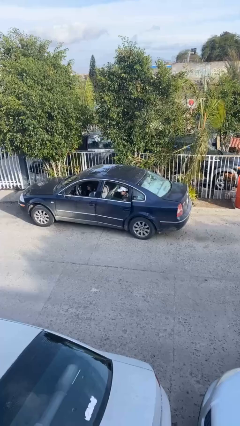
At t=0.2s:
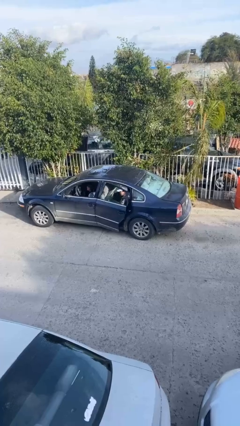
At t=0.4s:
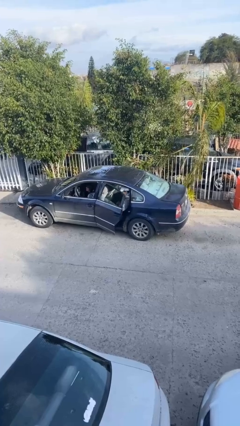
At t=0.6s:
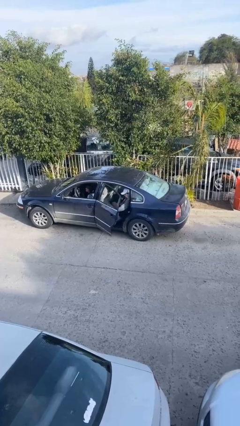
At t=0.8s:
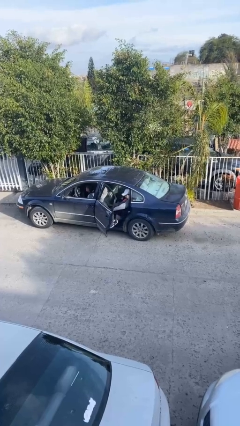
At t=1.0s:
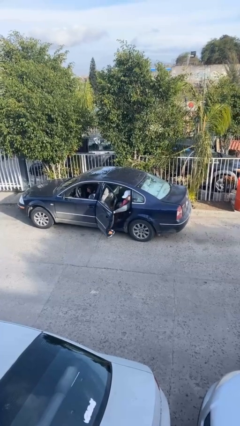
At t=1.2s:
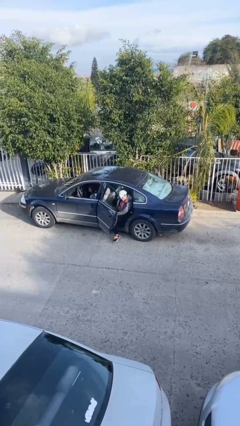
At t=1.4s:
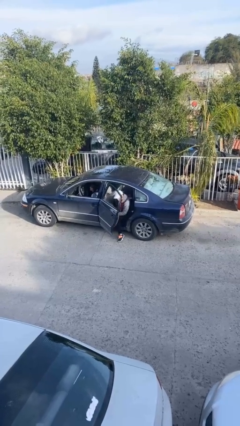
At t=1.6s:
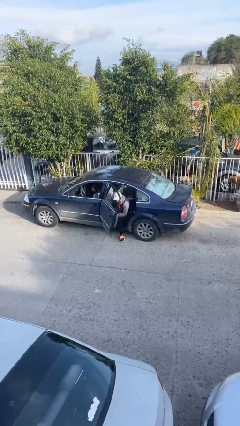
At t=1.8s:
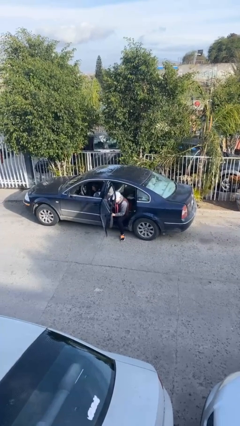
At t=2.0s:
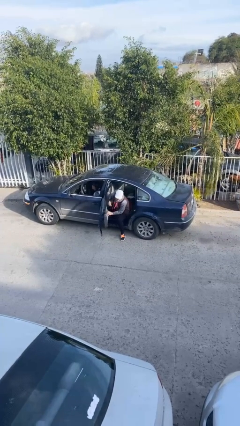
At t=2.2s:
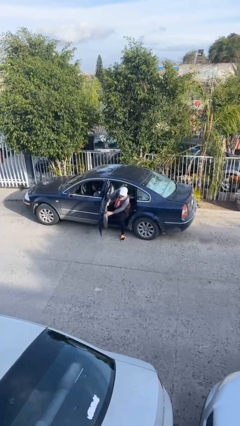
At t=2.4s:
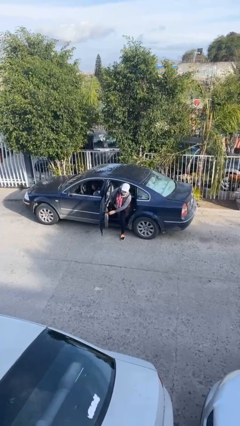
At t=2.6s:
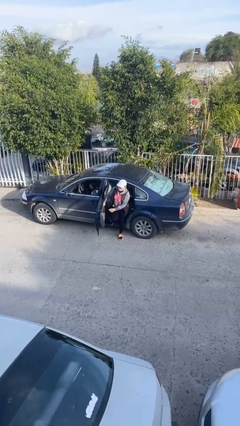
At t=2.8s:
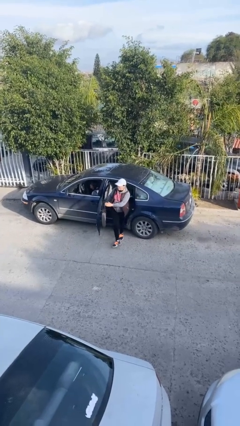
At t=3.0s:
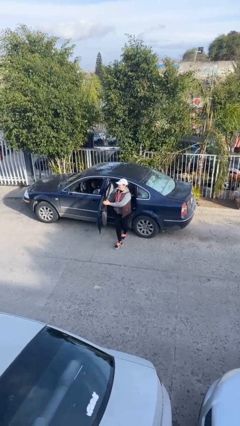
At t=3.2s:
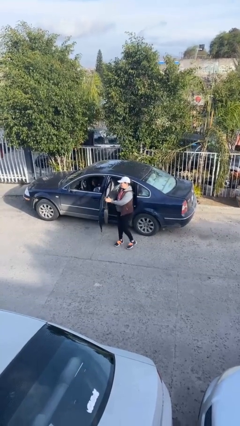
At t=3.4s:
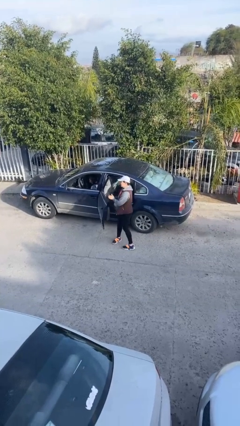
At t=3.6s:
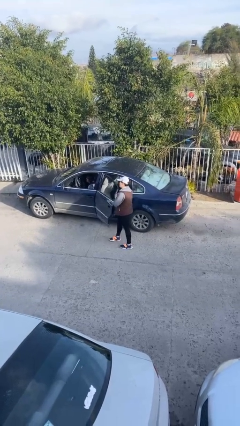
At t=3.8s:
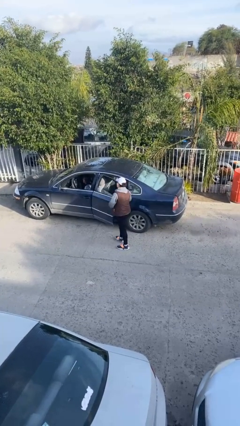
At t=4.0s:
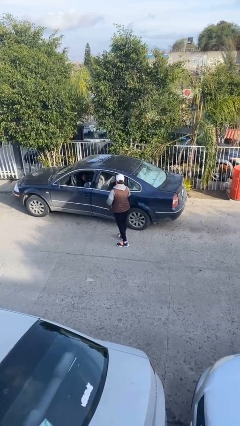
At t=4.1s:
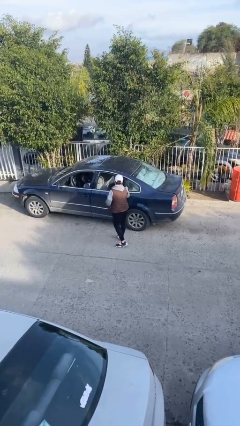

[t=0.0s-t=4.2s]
car drops off person

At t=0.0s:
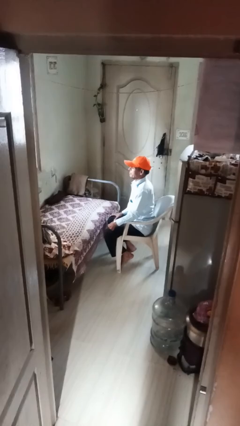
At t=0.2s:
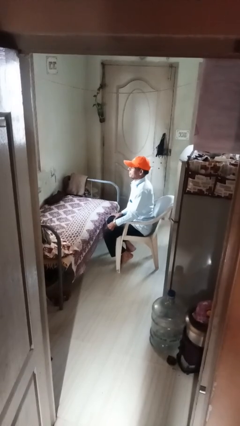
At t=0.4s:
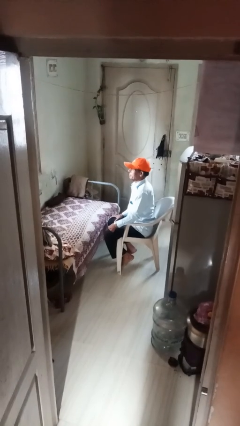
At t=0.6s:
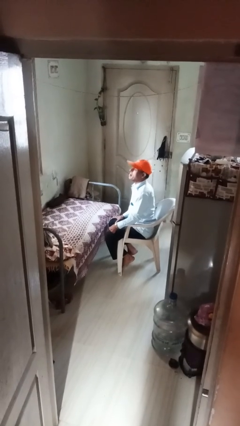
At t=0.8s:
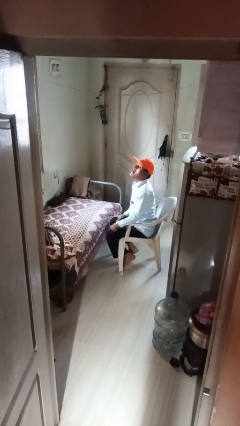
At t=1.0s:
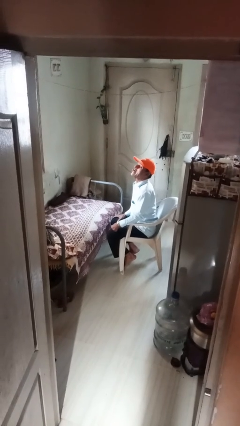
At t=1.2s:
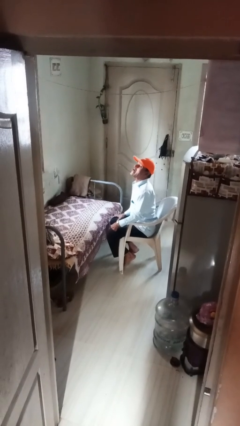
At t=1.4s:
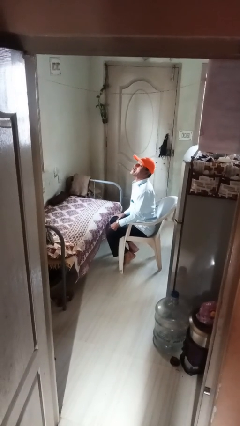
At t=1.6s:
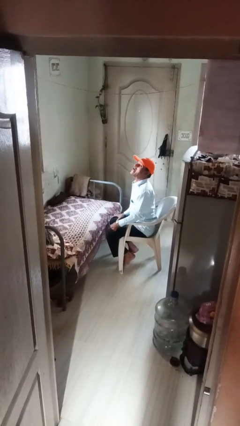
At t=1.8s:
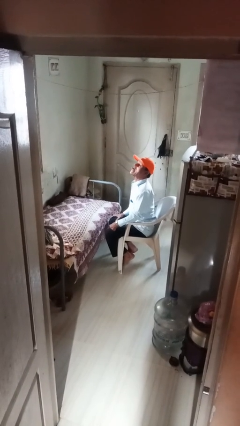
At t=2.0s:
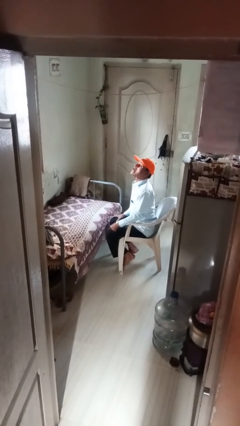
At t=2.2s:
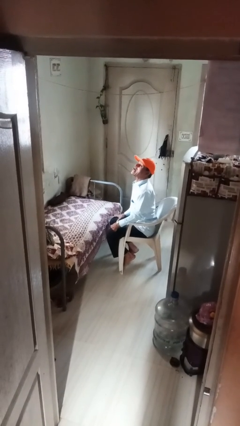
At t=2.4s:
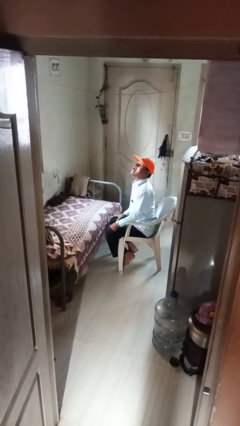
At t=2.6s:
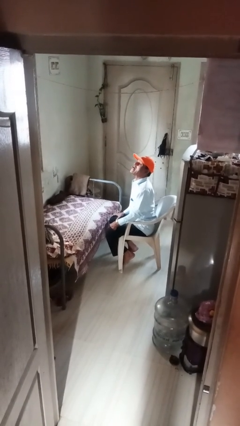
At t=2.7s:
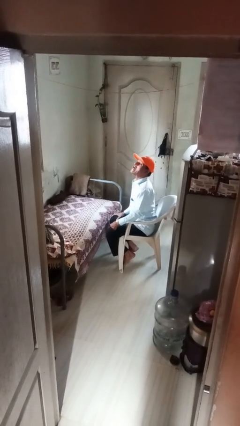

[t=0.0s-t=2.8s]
person sticks out tongue

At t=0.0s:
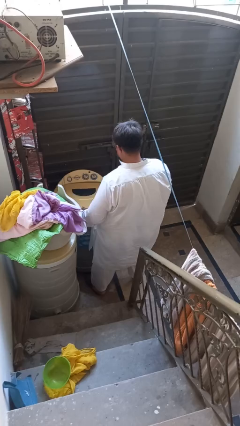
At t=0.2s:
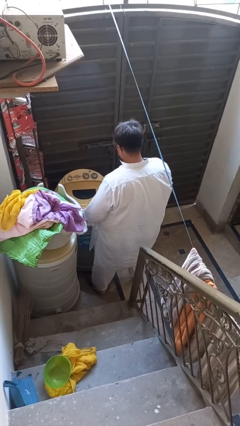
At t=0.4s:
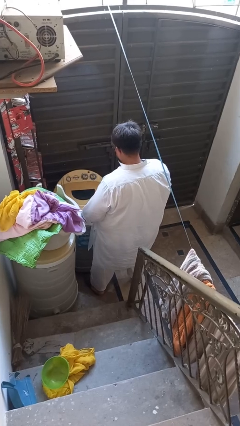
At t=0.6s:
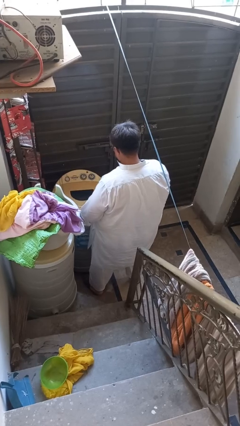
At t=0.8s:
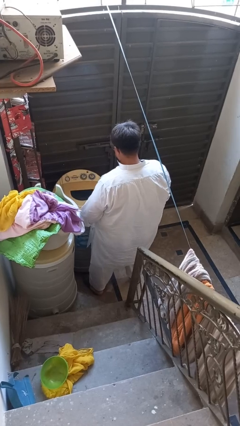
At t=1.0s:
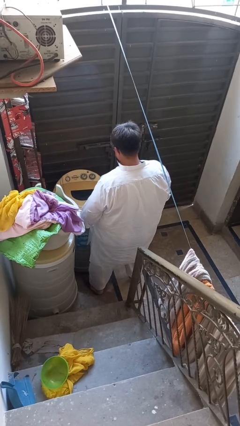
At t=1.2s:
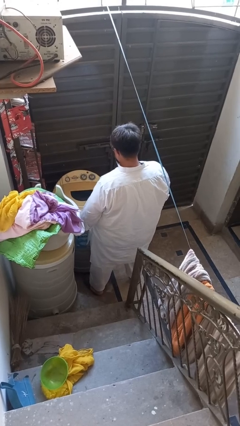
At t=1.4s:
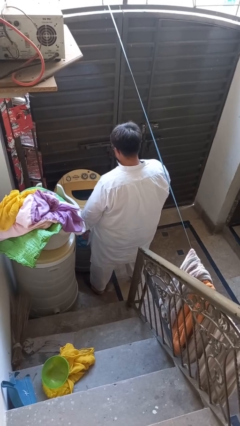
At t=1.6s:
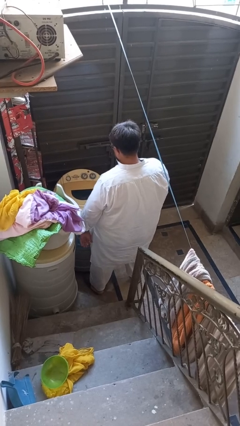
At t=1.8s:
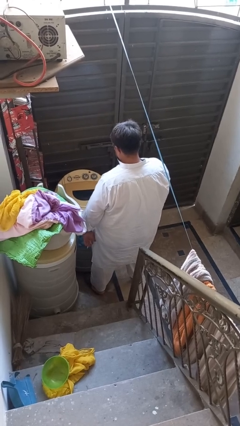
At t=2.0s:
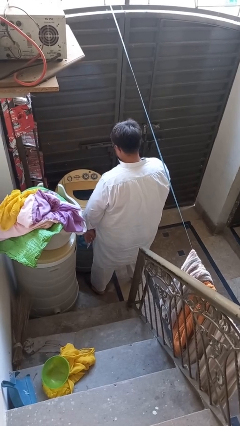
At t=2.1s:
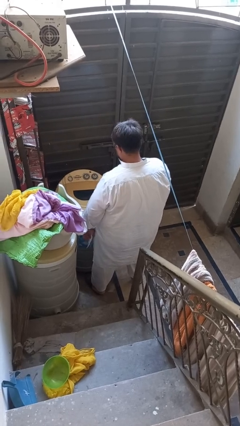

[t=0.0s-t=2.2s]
person closes clothes washer

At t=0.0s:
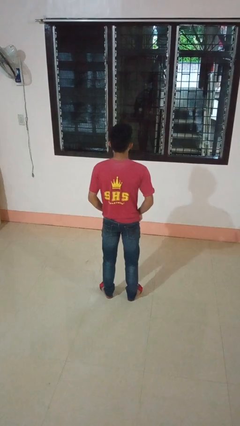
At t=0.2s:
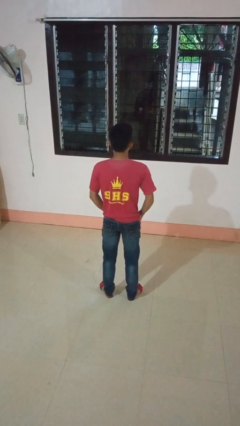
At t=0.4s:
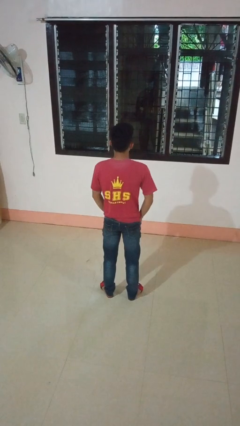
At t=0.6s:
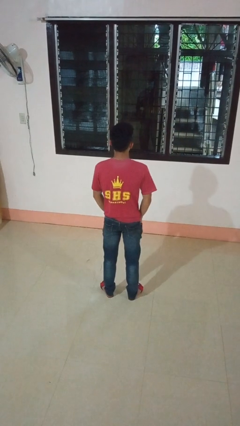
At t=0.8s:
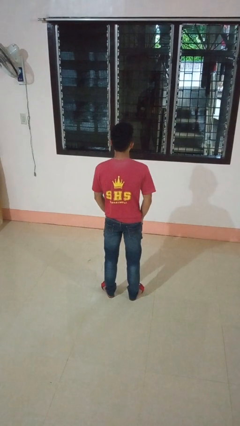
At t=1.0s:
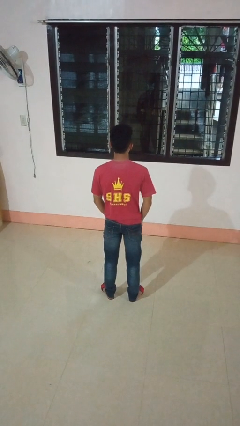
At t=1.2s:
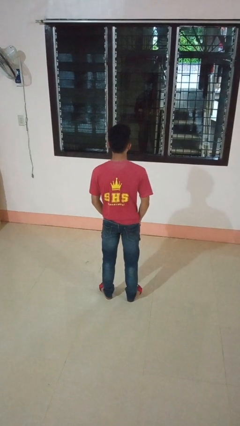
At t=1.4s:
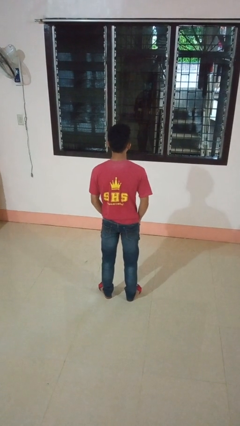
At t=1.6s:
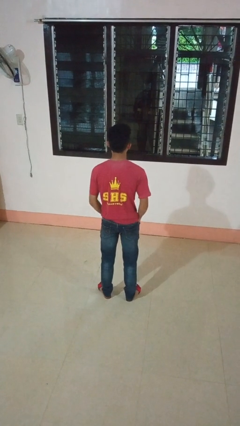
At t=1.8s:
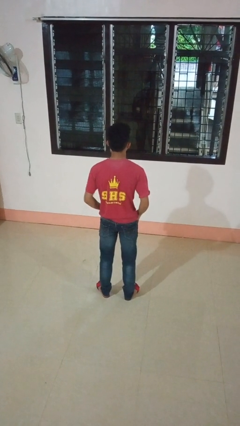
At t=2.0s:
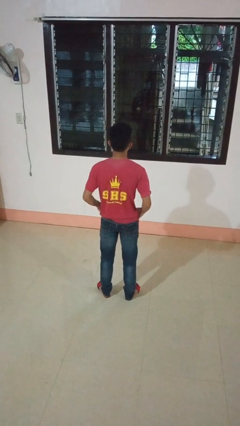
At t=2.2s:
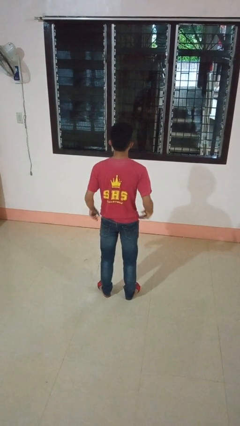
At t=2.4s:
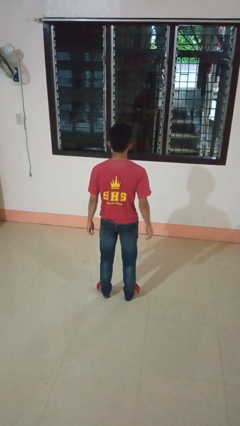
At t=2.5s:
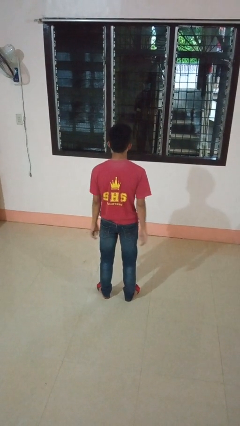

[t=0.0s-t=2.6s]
person puts hands in back pockets

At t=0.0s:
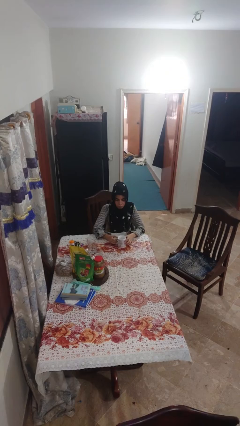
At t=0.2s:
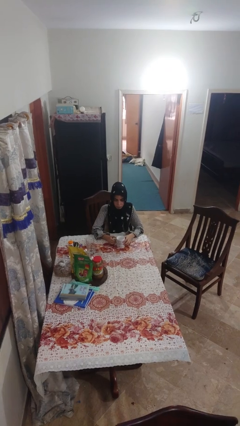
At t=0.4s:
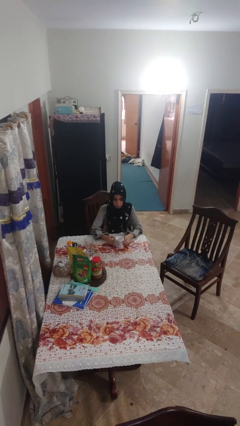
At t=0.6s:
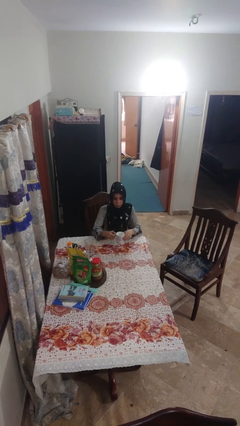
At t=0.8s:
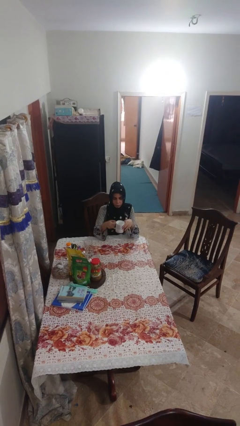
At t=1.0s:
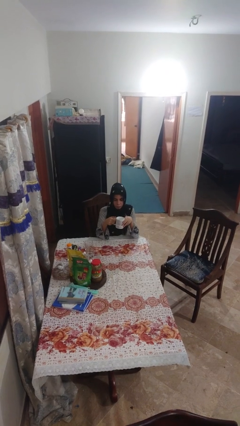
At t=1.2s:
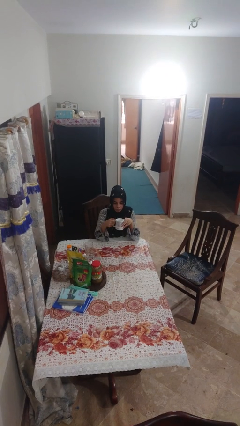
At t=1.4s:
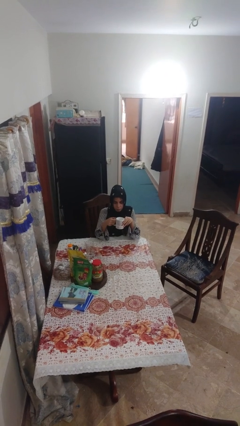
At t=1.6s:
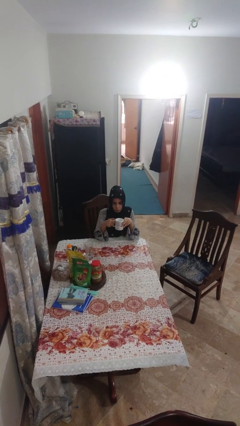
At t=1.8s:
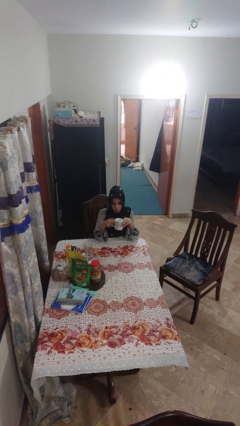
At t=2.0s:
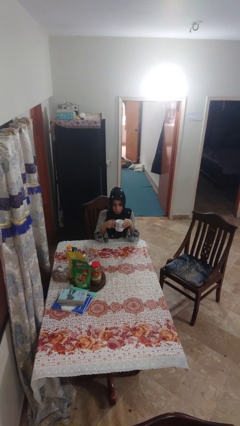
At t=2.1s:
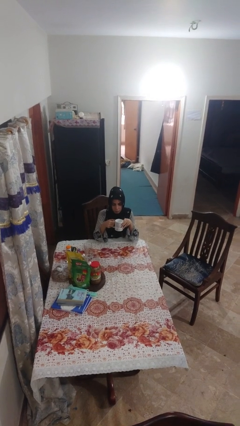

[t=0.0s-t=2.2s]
person picks up object from table

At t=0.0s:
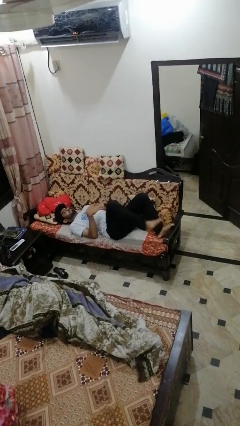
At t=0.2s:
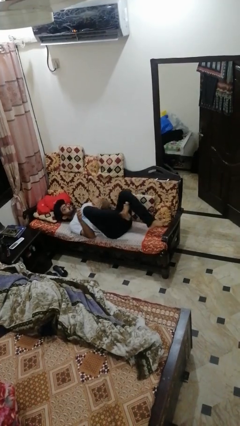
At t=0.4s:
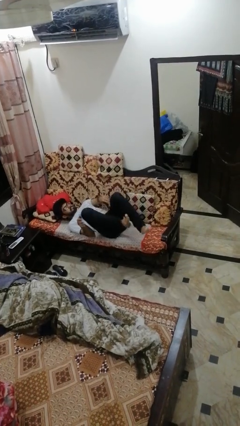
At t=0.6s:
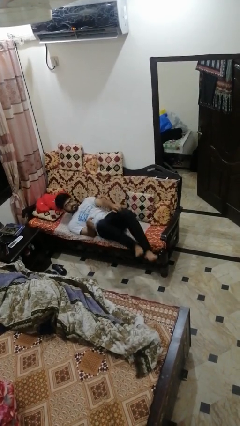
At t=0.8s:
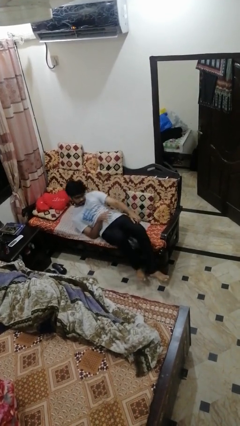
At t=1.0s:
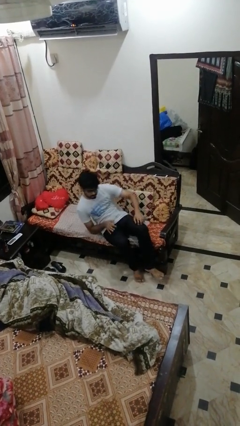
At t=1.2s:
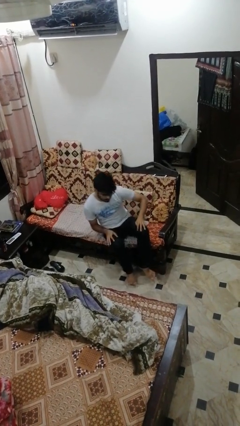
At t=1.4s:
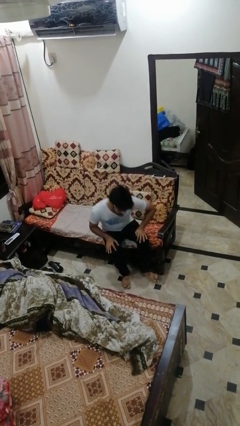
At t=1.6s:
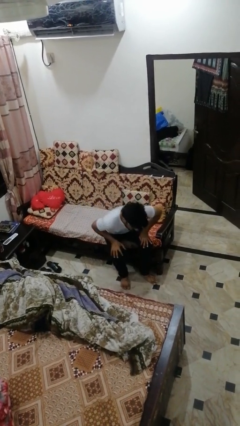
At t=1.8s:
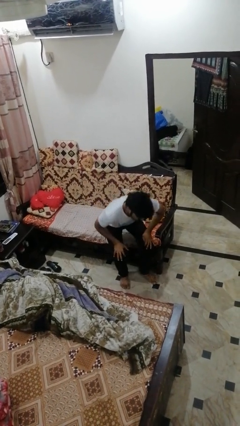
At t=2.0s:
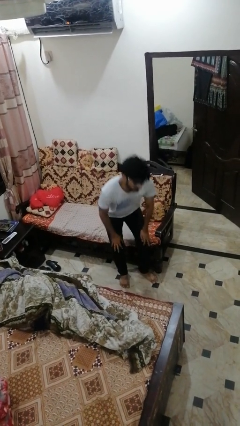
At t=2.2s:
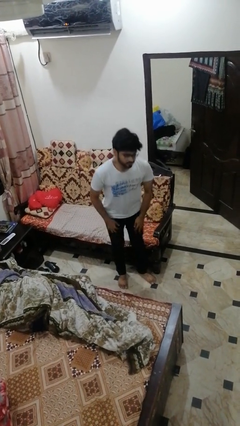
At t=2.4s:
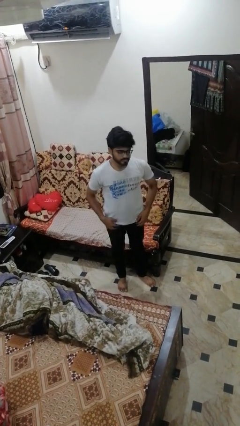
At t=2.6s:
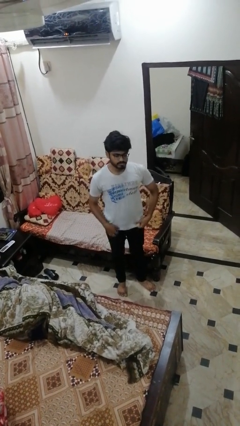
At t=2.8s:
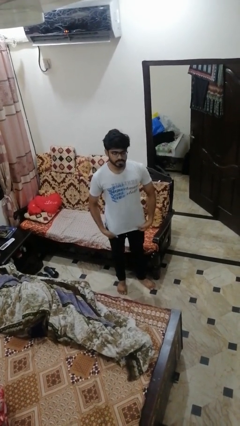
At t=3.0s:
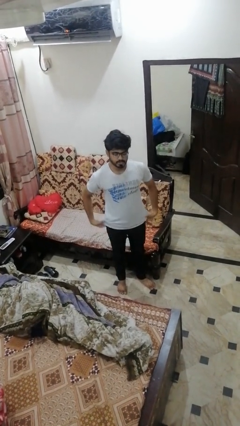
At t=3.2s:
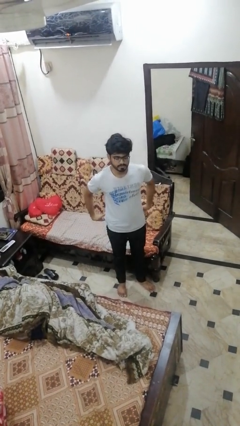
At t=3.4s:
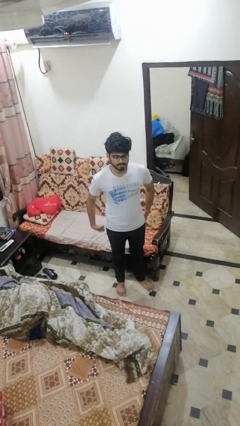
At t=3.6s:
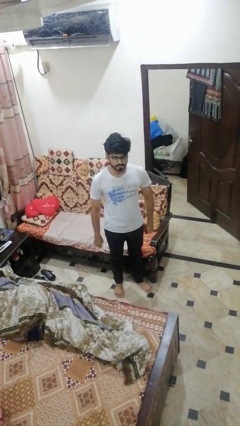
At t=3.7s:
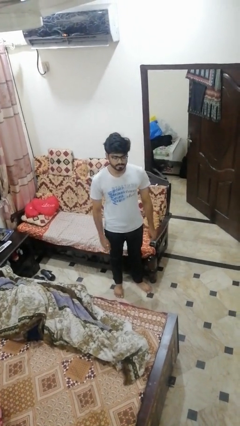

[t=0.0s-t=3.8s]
person stands up
